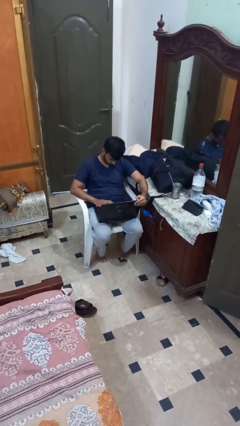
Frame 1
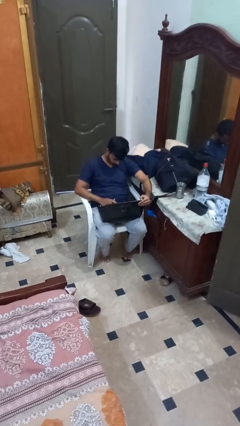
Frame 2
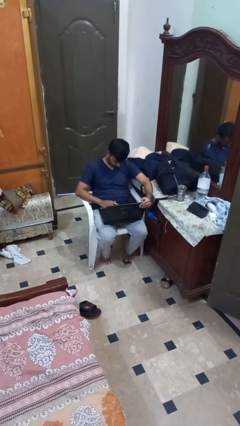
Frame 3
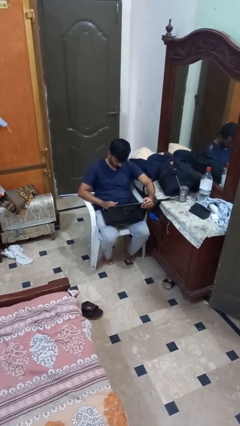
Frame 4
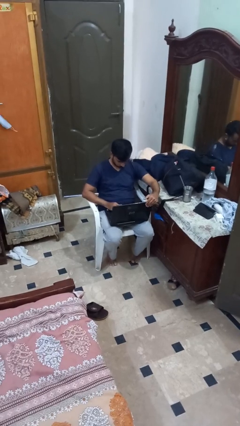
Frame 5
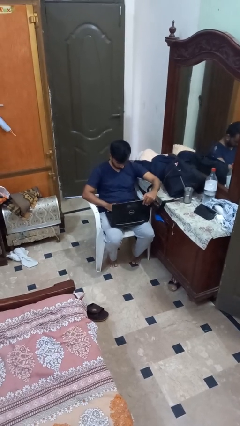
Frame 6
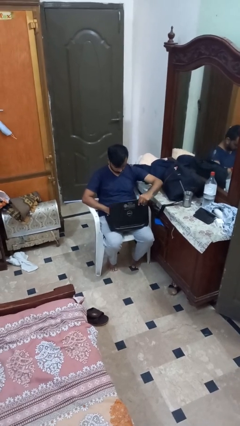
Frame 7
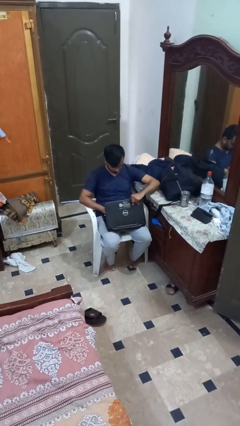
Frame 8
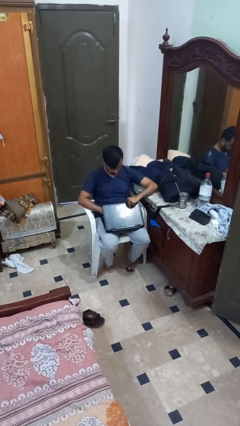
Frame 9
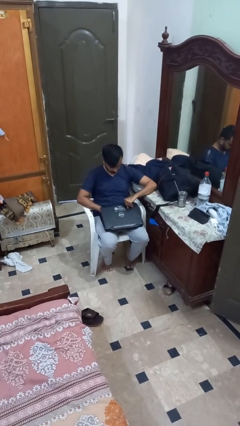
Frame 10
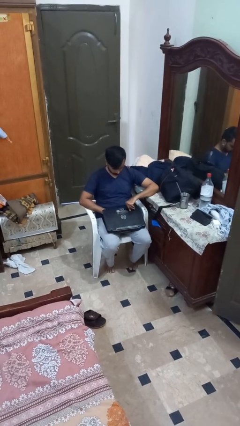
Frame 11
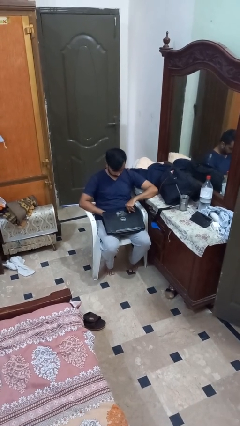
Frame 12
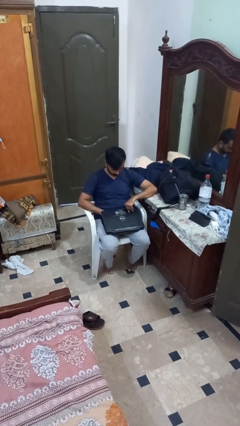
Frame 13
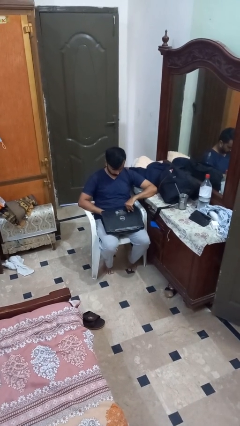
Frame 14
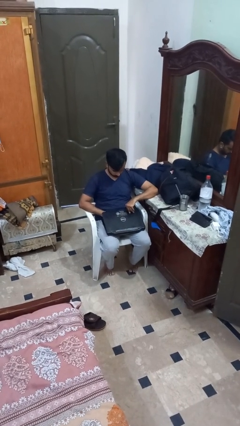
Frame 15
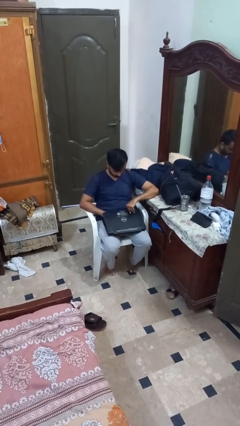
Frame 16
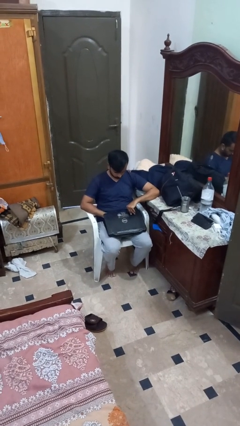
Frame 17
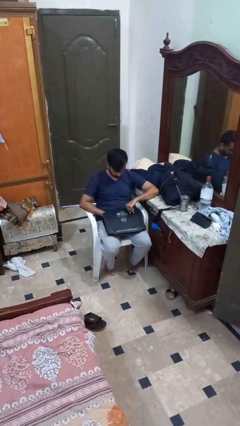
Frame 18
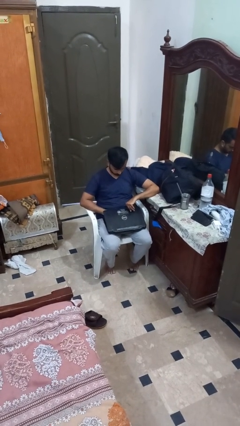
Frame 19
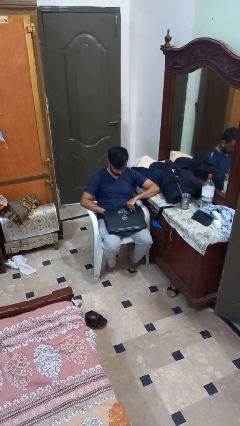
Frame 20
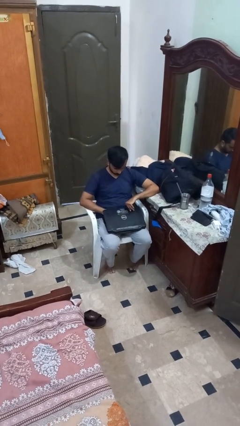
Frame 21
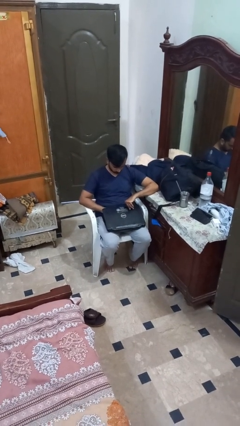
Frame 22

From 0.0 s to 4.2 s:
person closes laptop

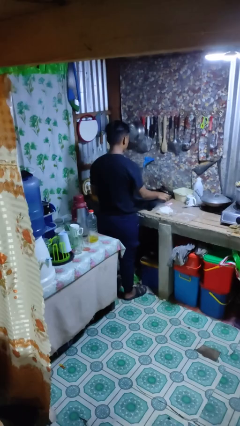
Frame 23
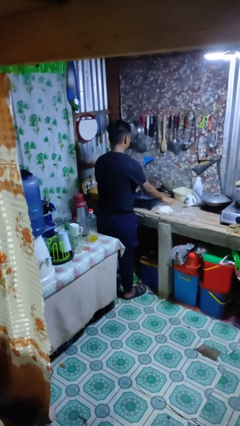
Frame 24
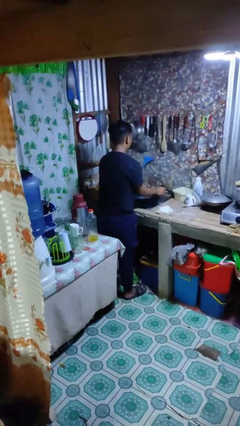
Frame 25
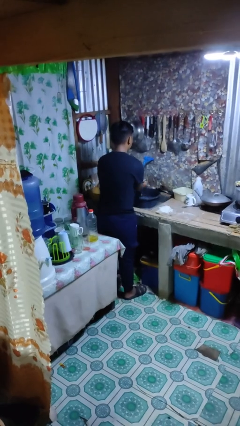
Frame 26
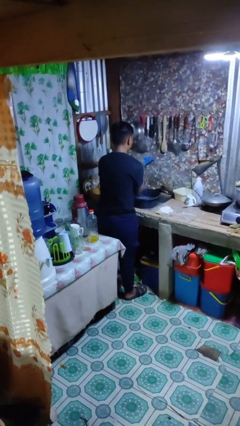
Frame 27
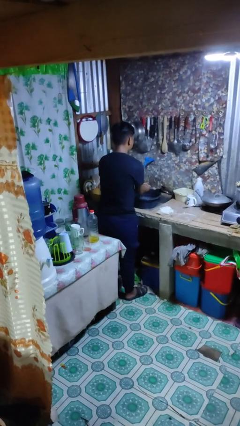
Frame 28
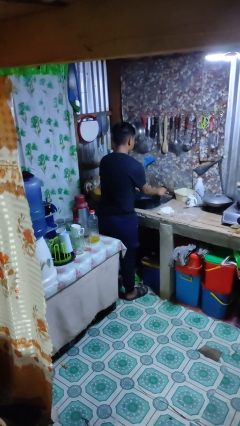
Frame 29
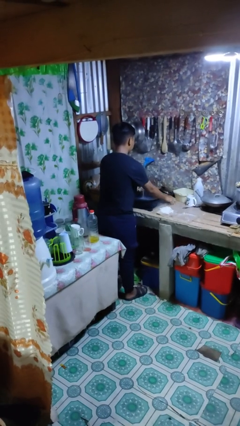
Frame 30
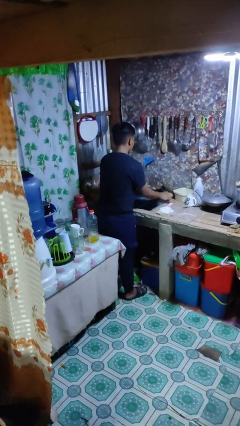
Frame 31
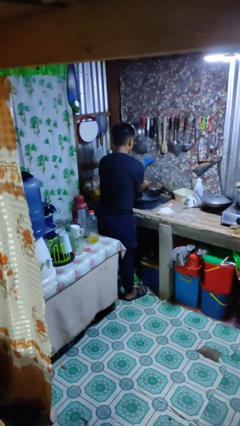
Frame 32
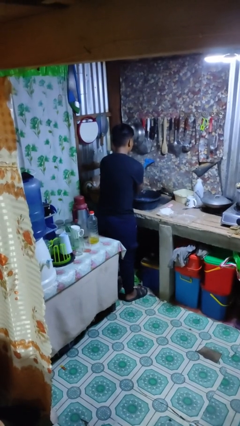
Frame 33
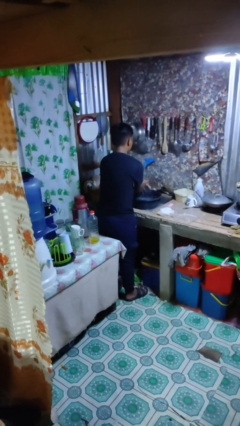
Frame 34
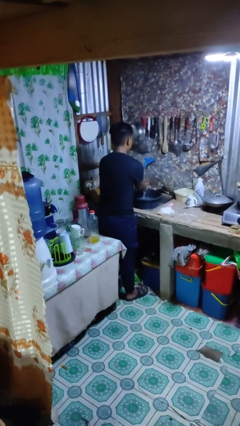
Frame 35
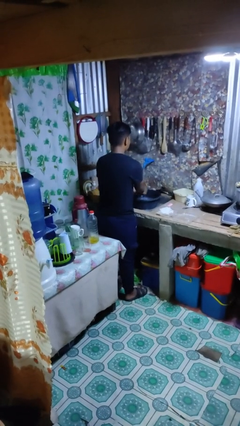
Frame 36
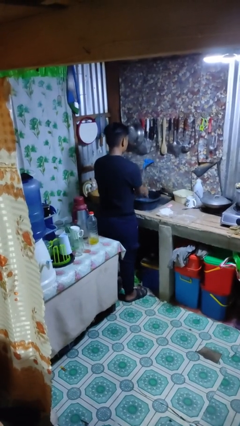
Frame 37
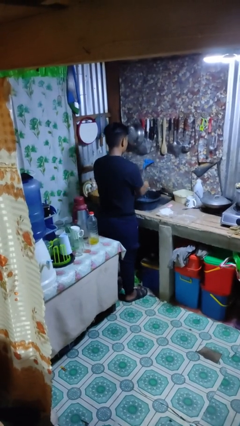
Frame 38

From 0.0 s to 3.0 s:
person washes hands

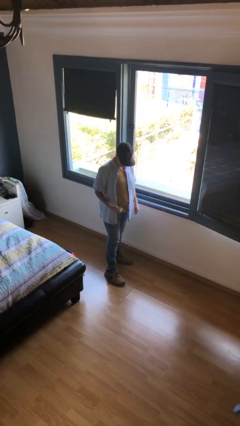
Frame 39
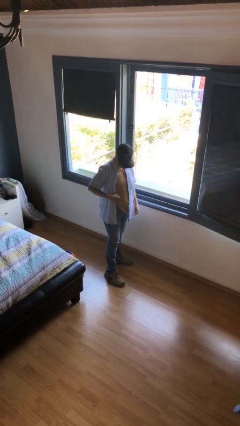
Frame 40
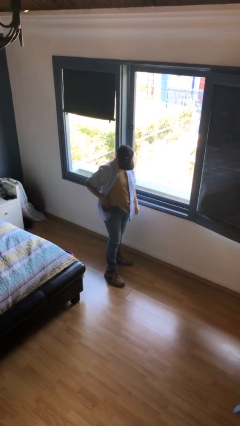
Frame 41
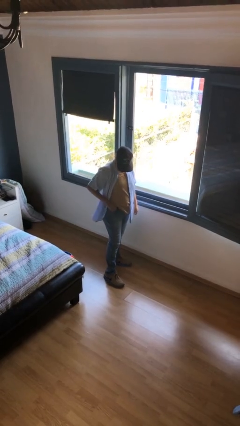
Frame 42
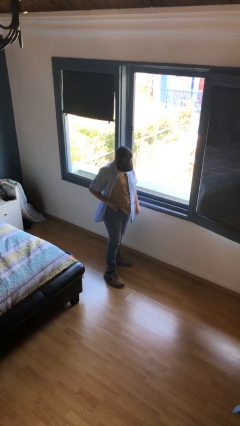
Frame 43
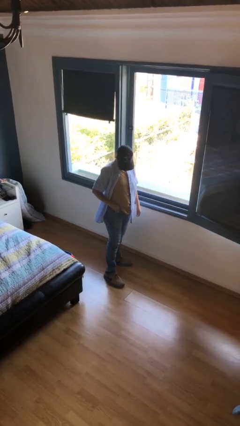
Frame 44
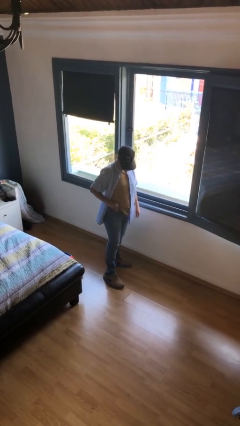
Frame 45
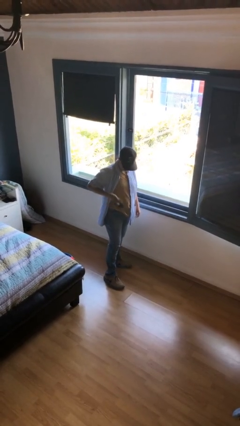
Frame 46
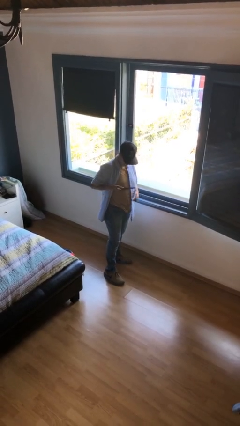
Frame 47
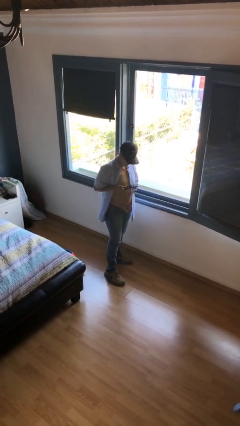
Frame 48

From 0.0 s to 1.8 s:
person takes phone from pocket

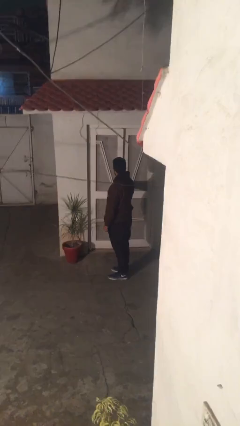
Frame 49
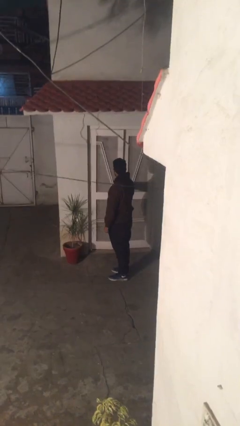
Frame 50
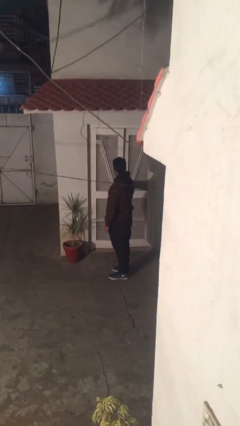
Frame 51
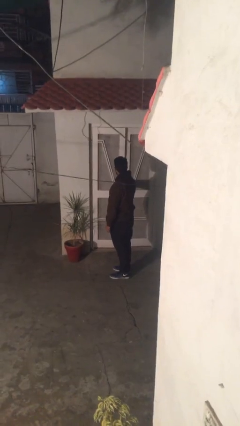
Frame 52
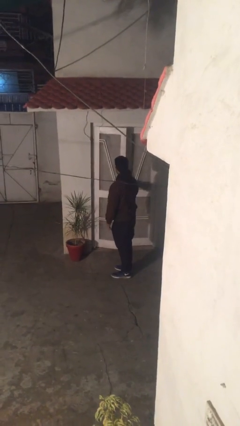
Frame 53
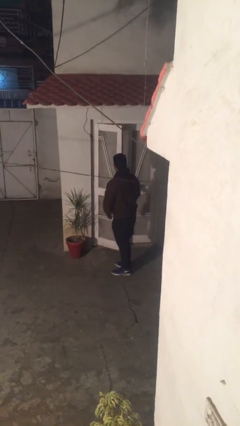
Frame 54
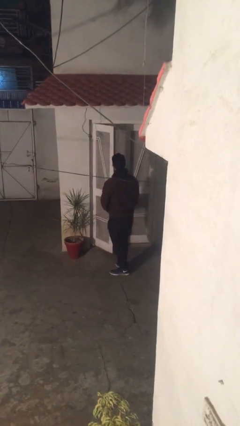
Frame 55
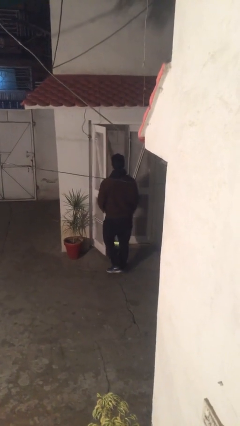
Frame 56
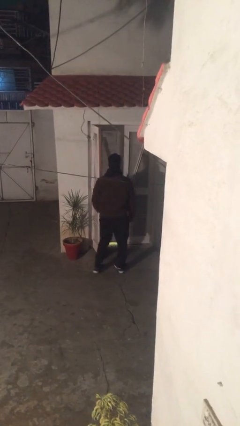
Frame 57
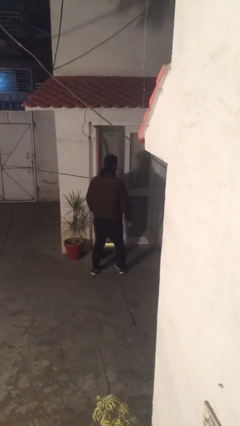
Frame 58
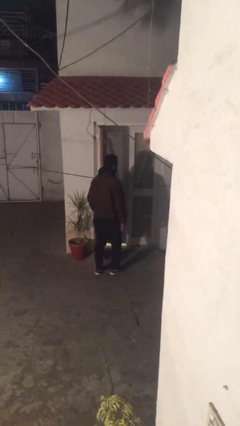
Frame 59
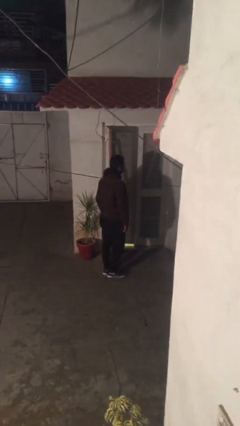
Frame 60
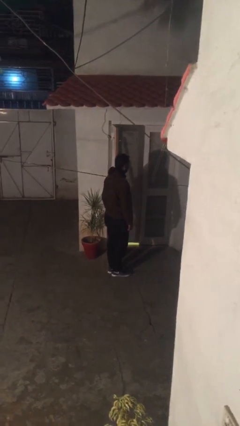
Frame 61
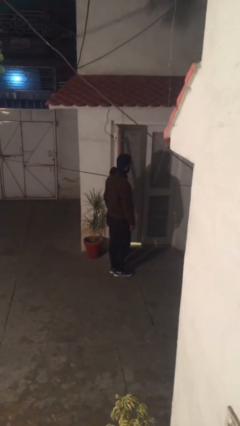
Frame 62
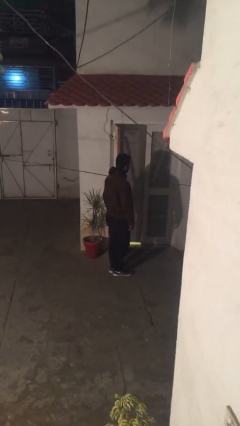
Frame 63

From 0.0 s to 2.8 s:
person opens facility door

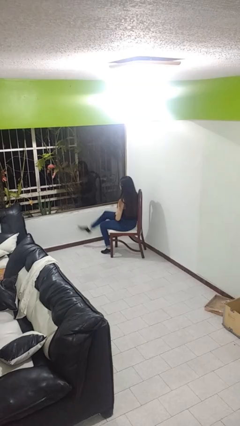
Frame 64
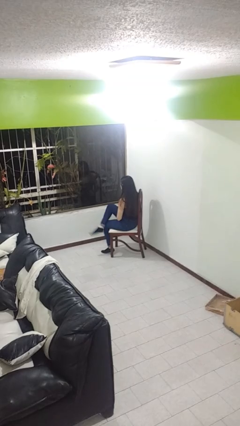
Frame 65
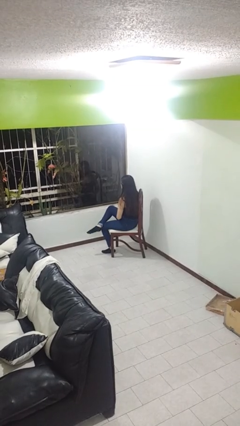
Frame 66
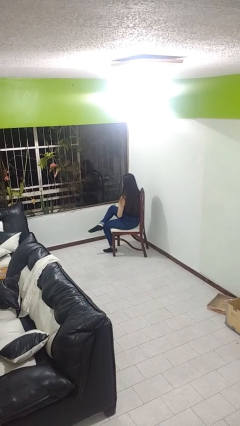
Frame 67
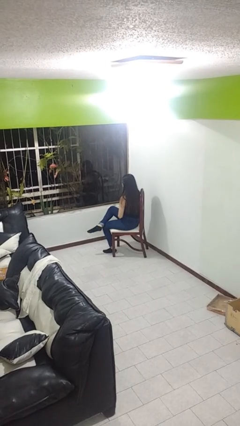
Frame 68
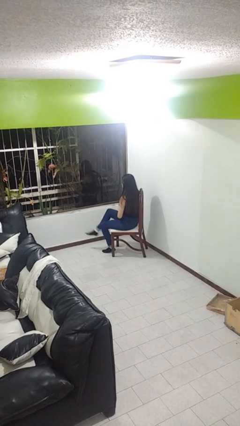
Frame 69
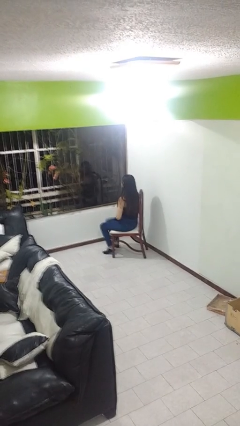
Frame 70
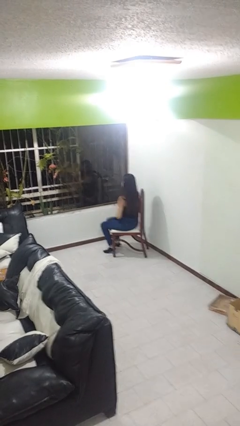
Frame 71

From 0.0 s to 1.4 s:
person crosses legs

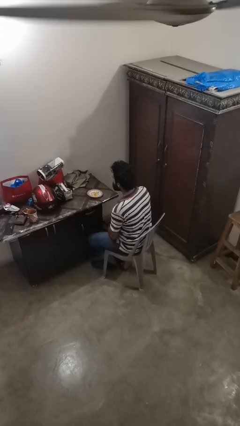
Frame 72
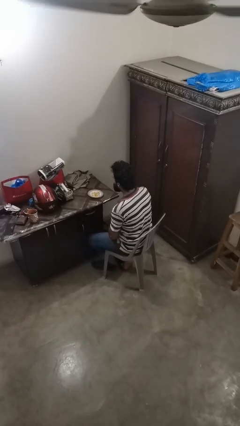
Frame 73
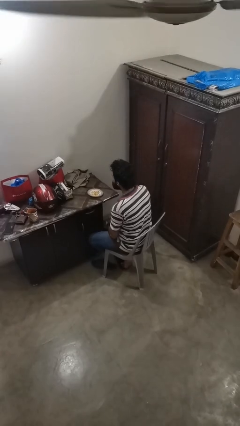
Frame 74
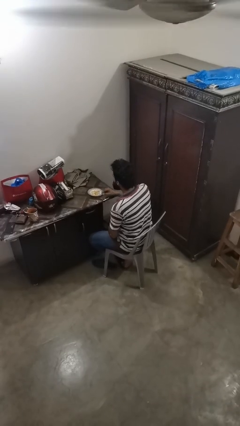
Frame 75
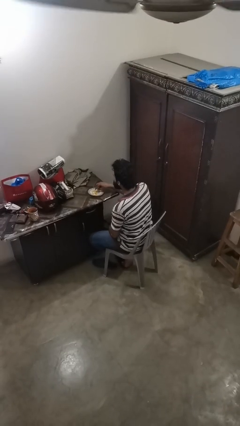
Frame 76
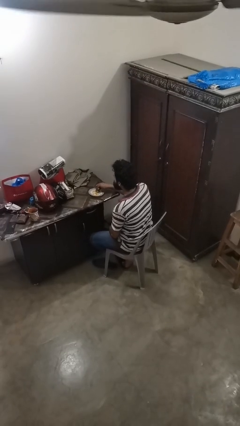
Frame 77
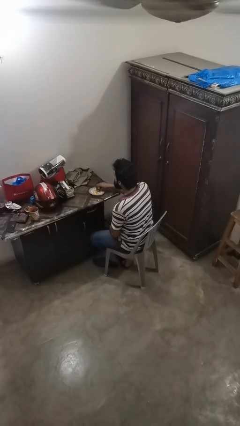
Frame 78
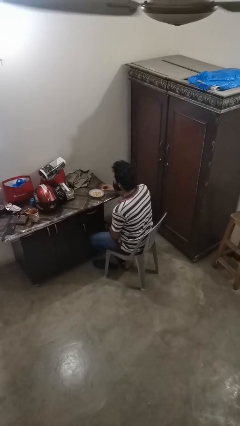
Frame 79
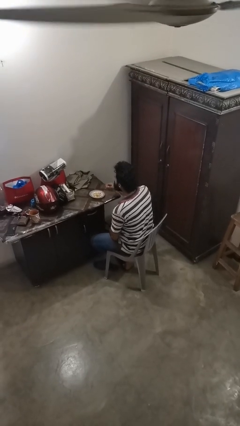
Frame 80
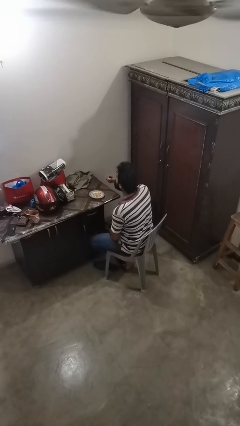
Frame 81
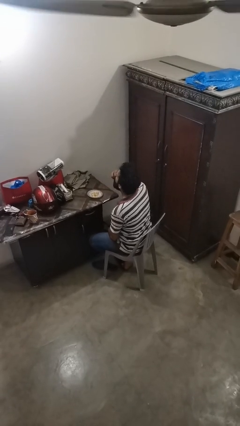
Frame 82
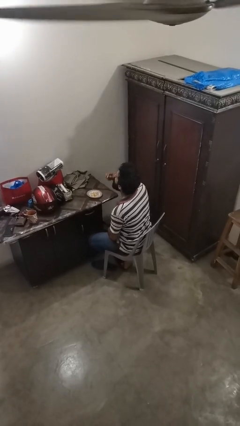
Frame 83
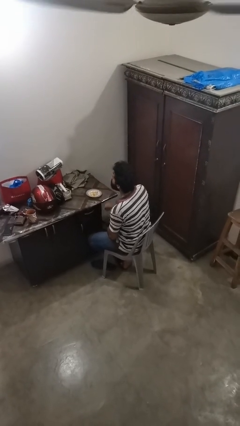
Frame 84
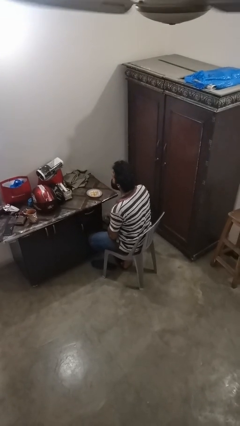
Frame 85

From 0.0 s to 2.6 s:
person eats with hands

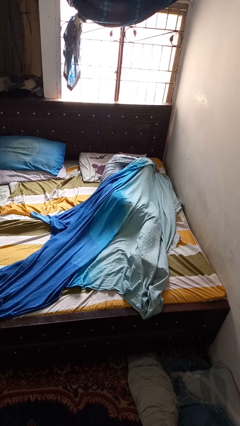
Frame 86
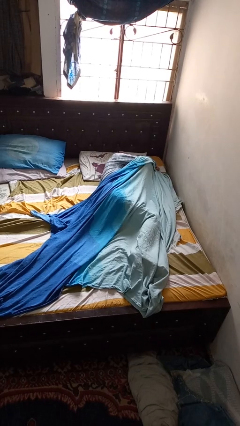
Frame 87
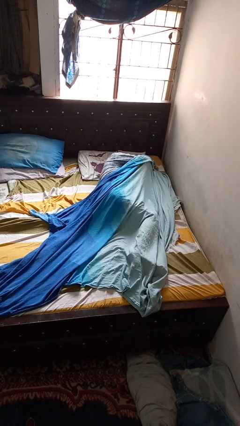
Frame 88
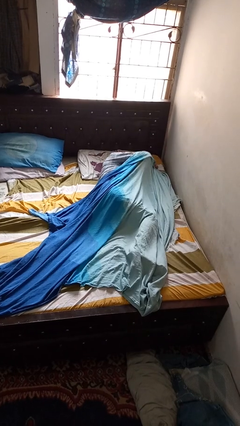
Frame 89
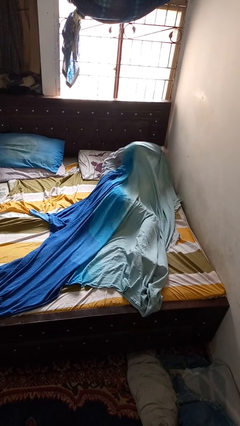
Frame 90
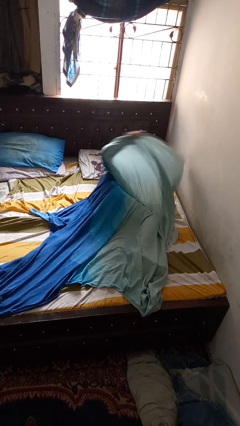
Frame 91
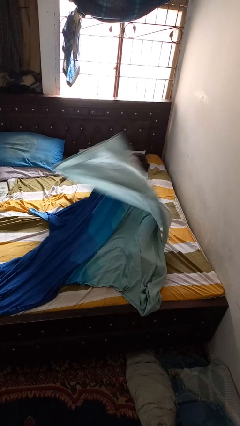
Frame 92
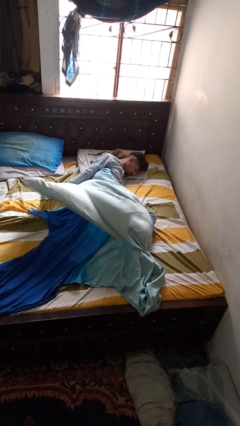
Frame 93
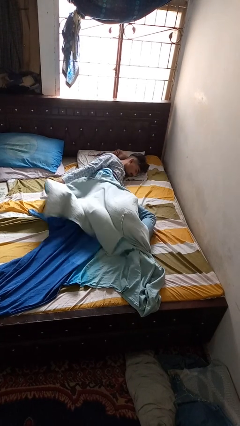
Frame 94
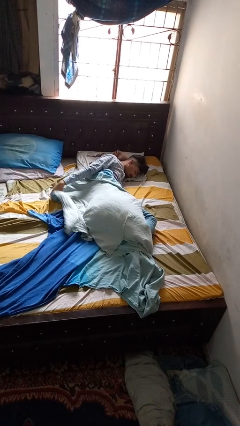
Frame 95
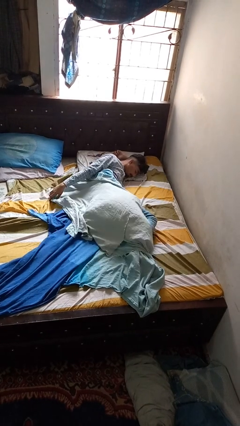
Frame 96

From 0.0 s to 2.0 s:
person uncovers with blanket
